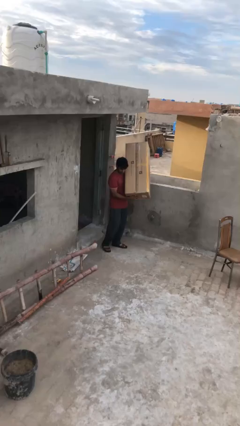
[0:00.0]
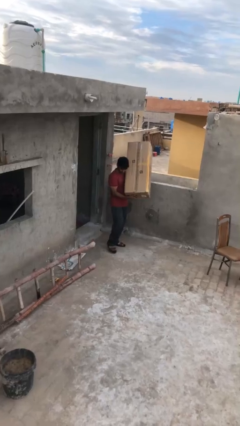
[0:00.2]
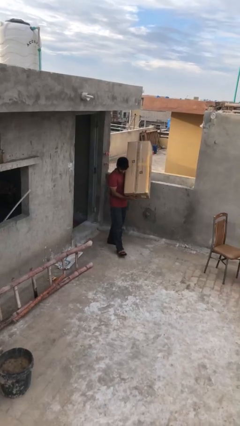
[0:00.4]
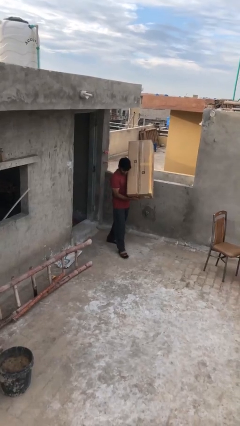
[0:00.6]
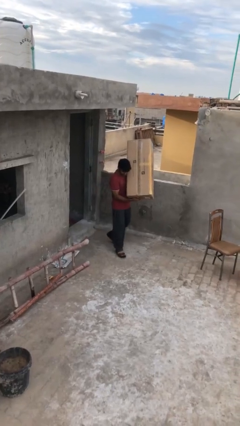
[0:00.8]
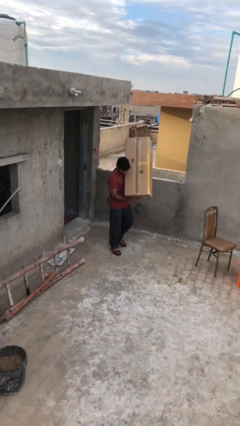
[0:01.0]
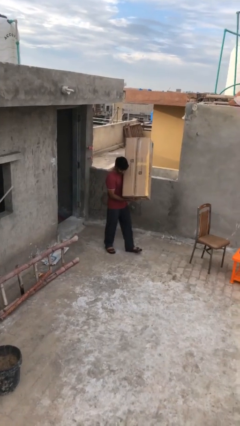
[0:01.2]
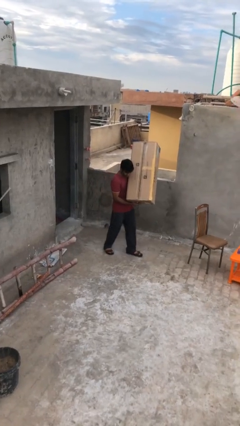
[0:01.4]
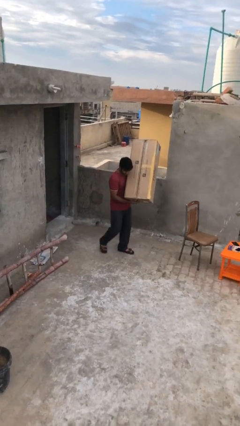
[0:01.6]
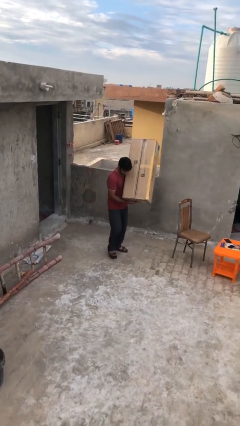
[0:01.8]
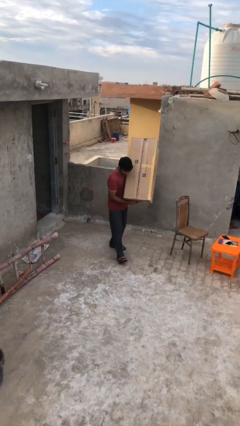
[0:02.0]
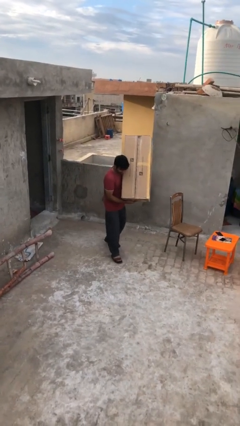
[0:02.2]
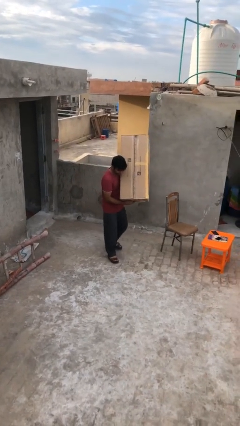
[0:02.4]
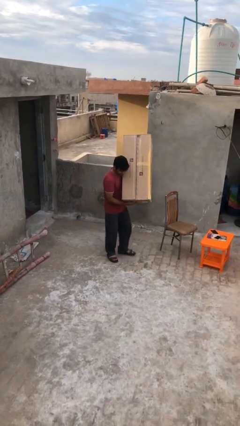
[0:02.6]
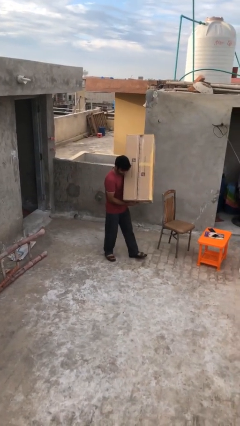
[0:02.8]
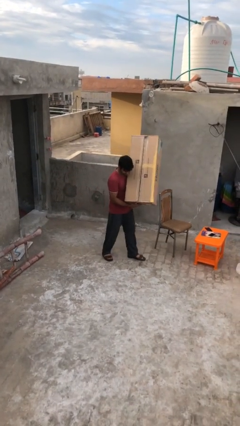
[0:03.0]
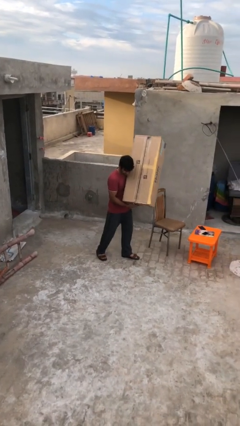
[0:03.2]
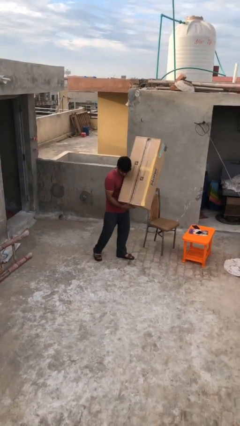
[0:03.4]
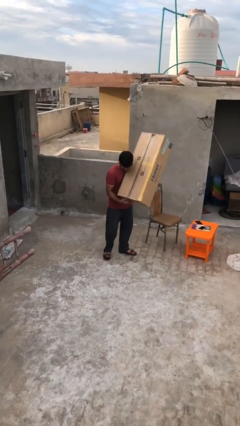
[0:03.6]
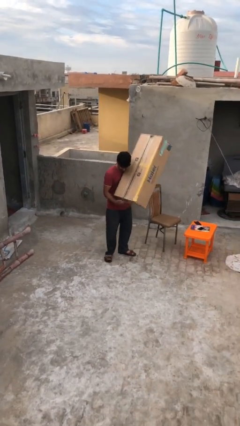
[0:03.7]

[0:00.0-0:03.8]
person carries heavy object

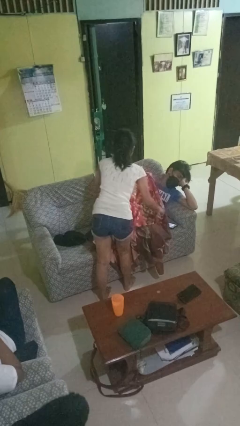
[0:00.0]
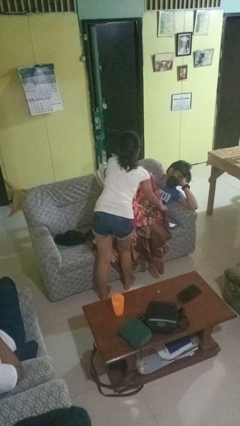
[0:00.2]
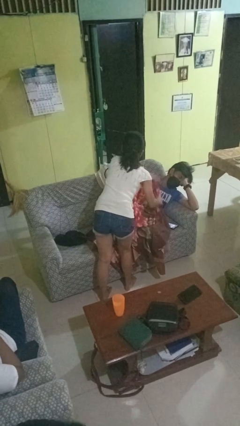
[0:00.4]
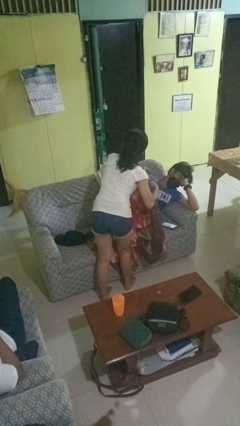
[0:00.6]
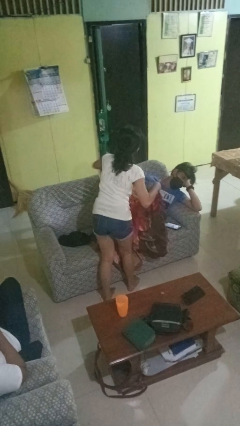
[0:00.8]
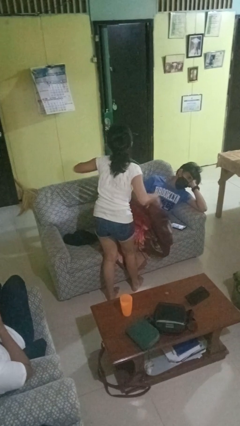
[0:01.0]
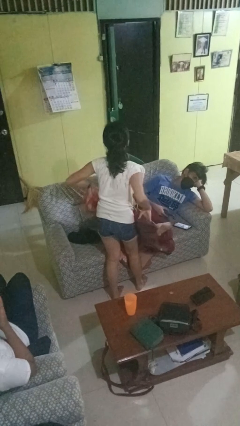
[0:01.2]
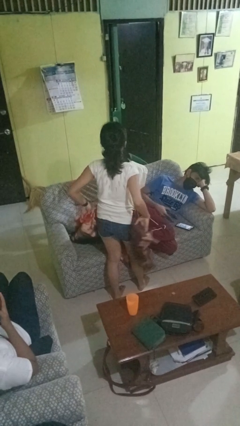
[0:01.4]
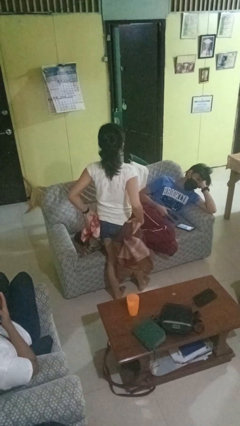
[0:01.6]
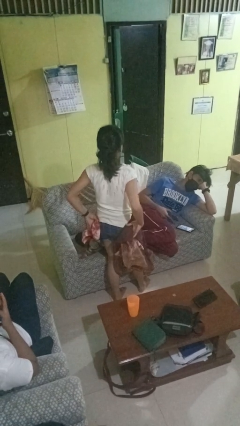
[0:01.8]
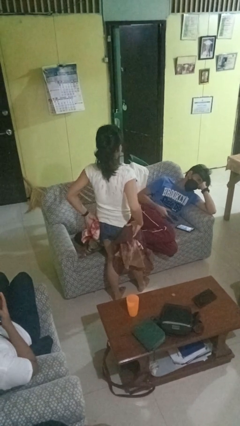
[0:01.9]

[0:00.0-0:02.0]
person uncovers friend with blanket

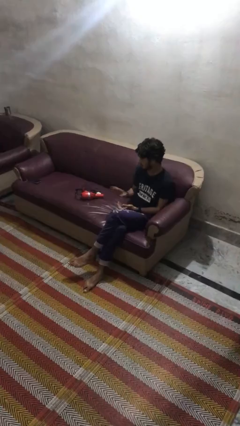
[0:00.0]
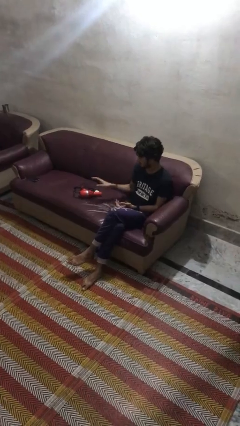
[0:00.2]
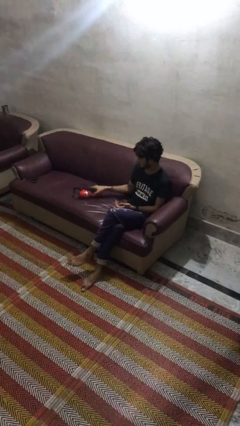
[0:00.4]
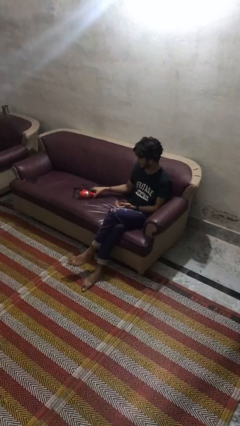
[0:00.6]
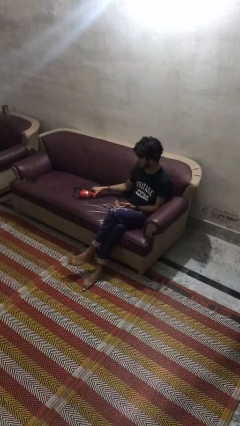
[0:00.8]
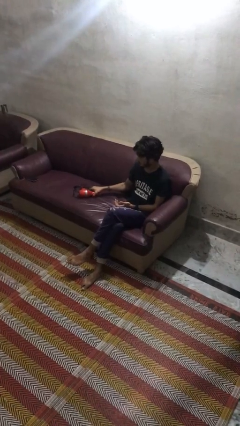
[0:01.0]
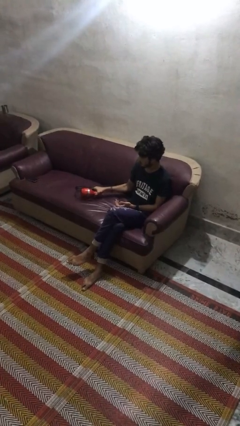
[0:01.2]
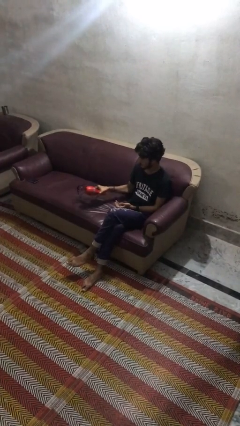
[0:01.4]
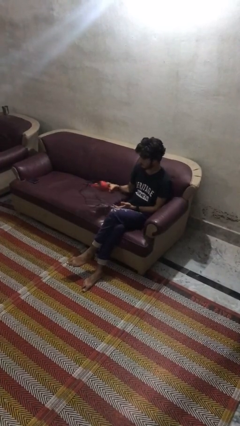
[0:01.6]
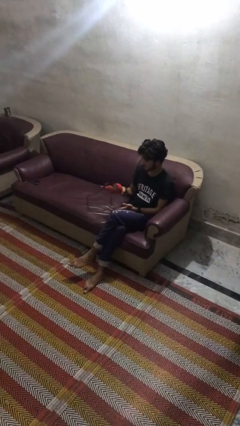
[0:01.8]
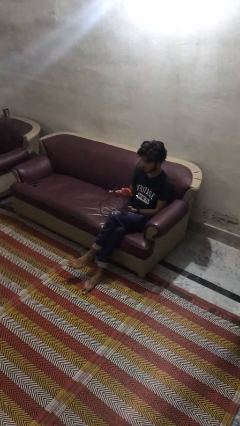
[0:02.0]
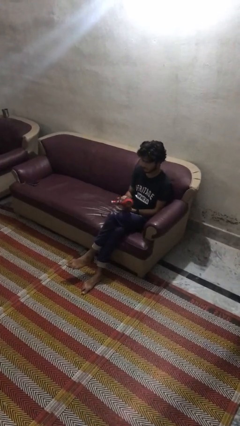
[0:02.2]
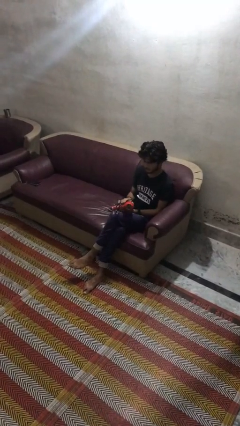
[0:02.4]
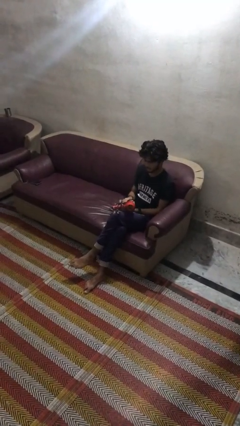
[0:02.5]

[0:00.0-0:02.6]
person picks up object from couch

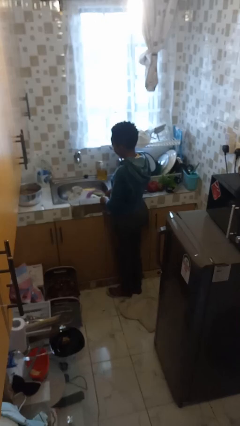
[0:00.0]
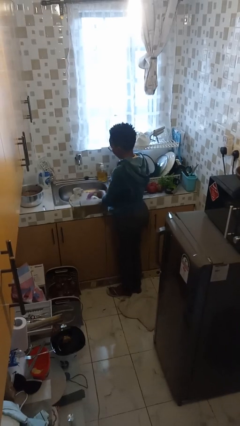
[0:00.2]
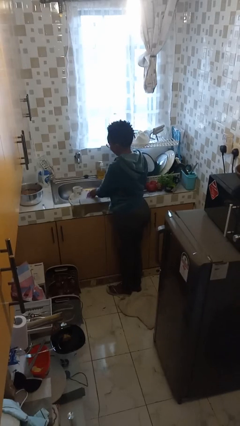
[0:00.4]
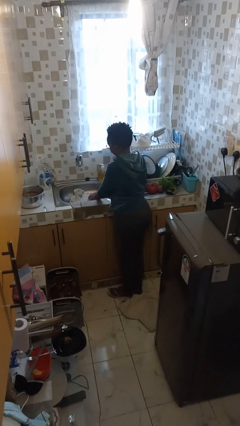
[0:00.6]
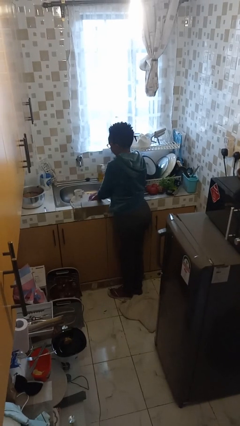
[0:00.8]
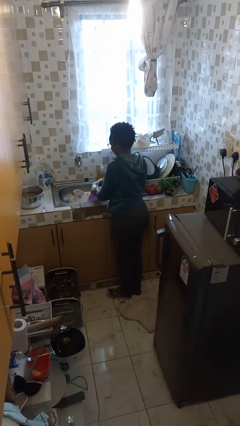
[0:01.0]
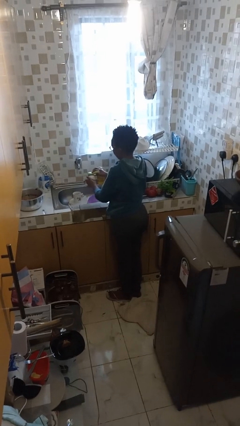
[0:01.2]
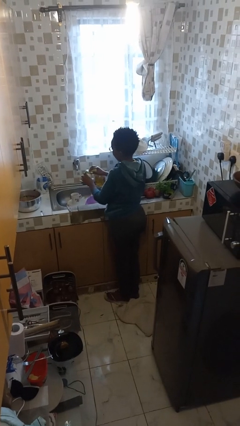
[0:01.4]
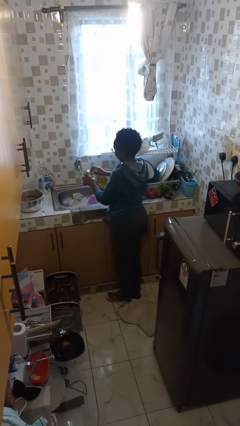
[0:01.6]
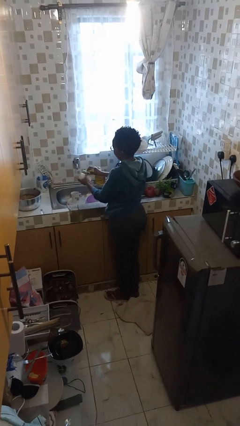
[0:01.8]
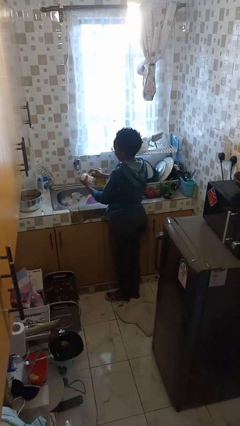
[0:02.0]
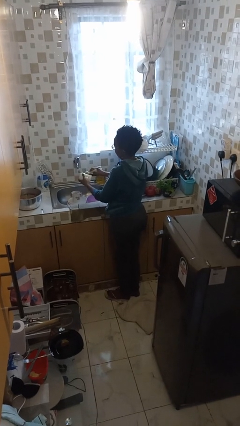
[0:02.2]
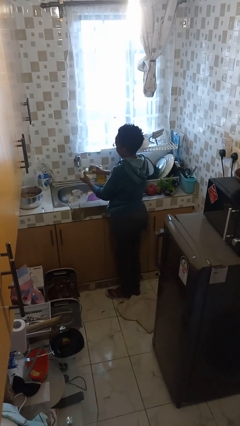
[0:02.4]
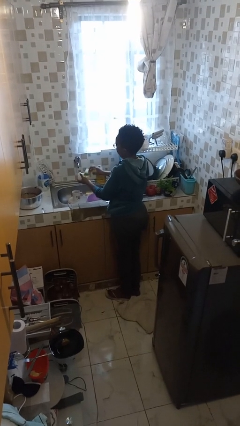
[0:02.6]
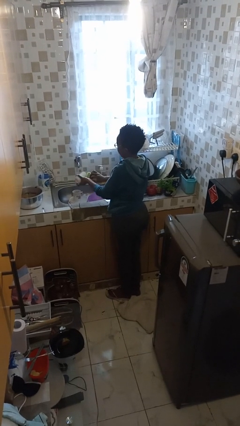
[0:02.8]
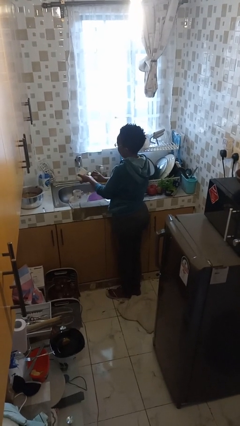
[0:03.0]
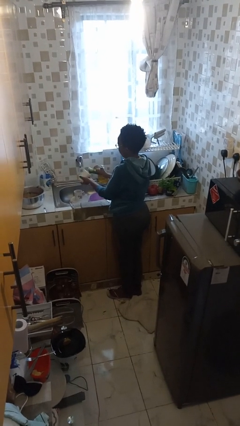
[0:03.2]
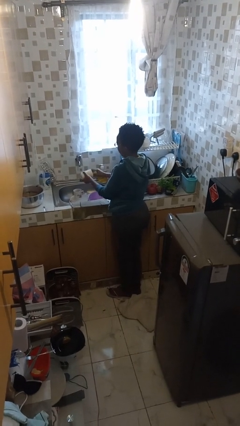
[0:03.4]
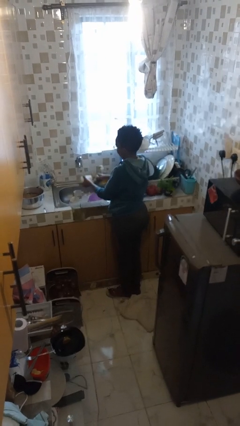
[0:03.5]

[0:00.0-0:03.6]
person washes dish

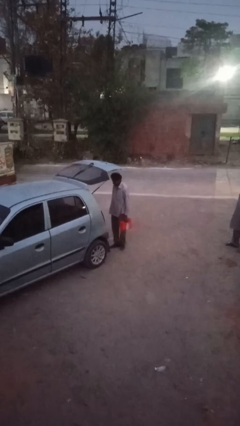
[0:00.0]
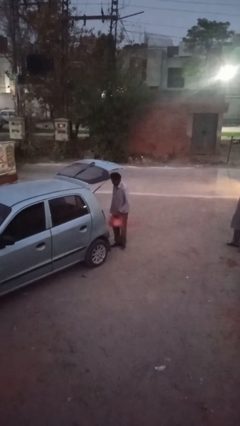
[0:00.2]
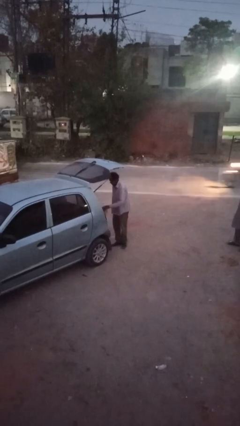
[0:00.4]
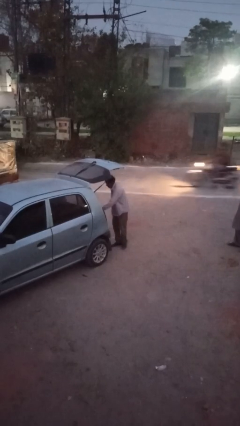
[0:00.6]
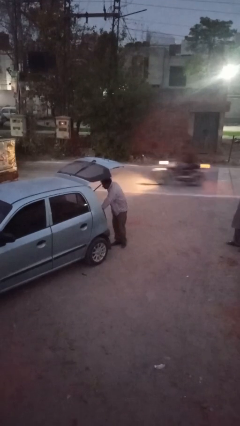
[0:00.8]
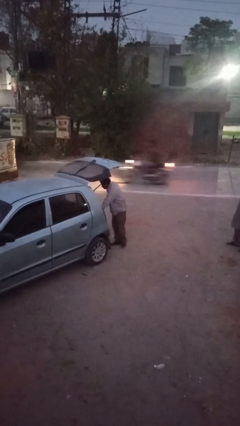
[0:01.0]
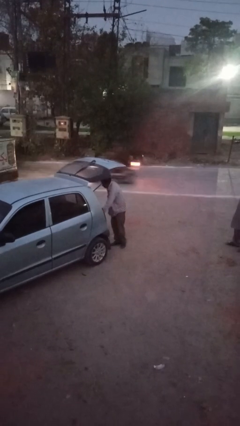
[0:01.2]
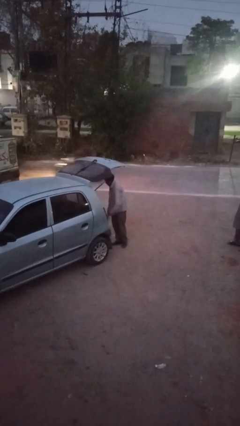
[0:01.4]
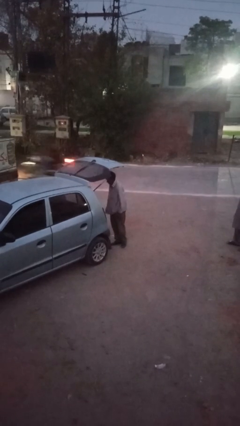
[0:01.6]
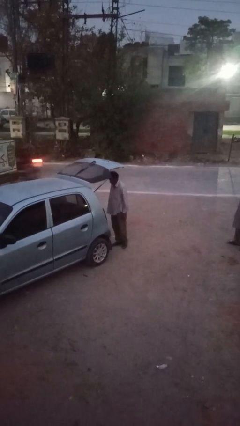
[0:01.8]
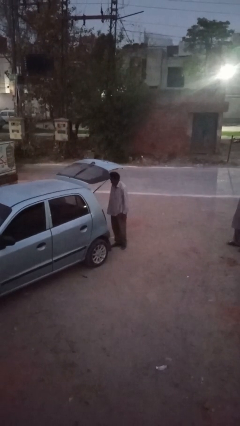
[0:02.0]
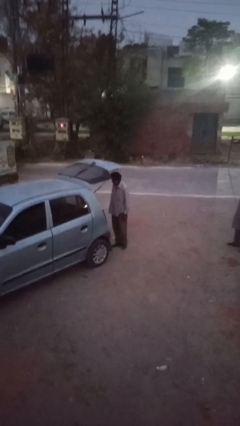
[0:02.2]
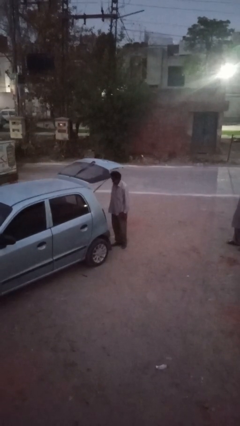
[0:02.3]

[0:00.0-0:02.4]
person loads car

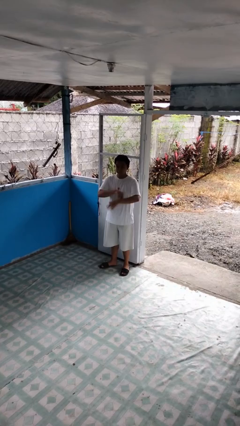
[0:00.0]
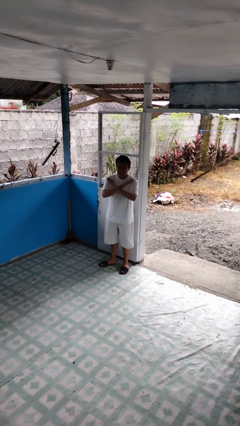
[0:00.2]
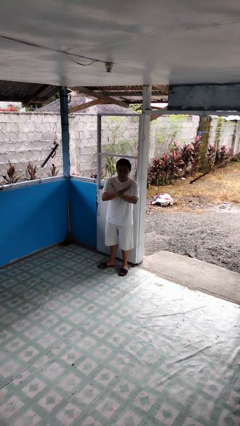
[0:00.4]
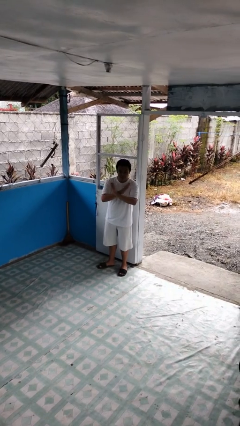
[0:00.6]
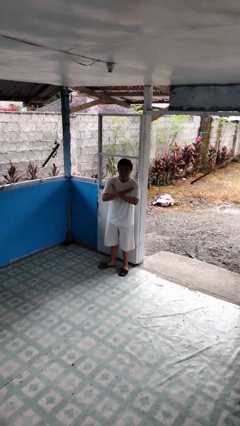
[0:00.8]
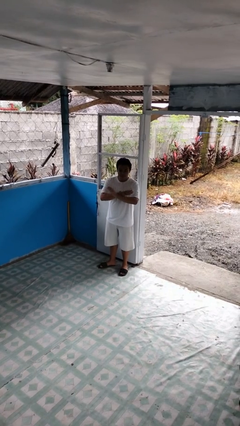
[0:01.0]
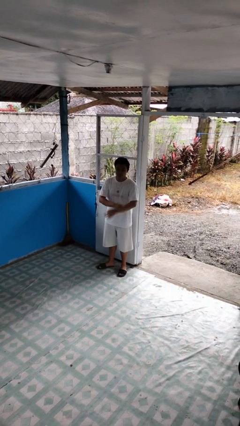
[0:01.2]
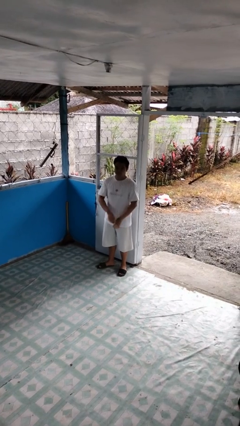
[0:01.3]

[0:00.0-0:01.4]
person gestures arms x

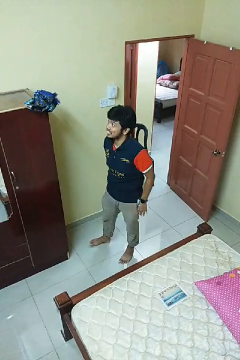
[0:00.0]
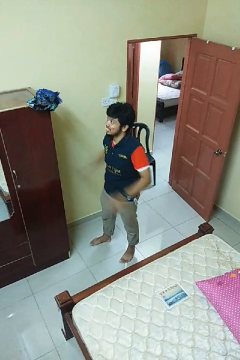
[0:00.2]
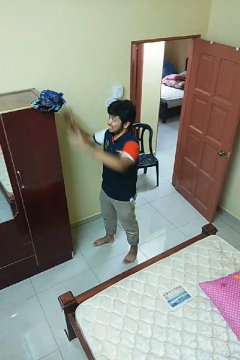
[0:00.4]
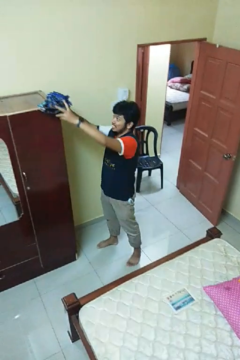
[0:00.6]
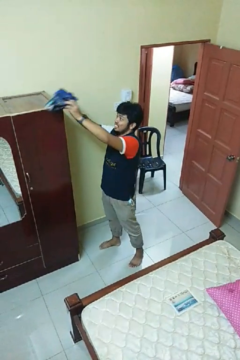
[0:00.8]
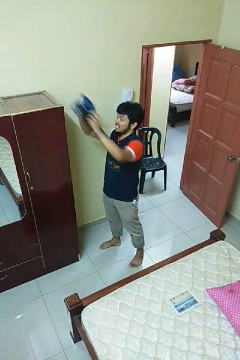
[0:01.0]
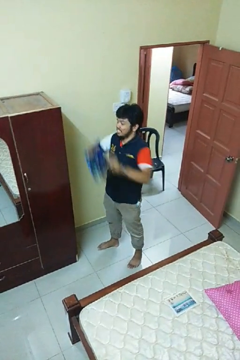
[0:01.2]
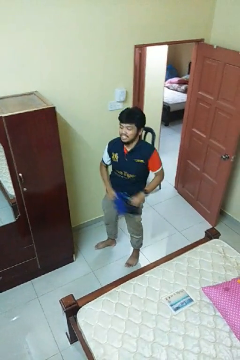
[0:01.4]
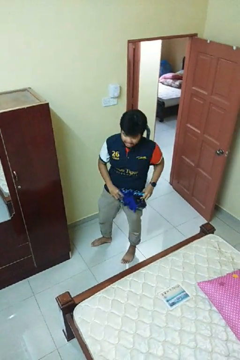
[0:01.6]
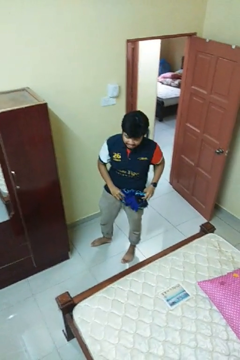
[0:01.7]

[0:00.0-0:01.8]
person picks up object from countertop
